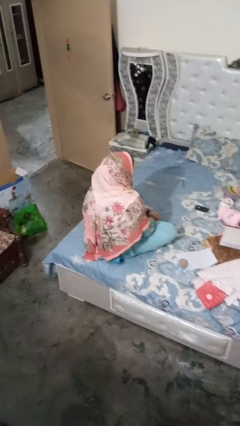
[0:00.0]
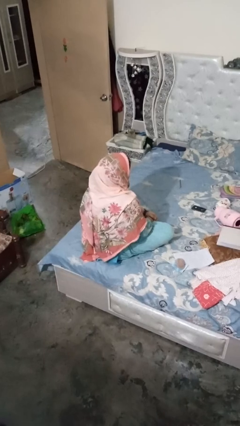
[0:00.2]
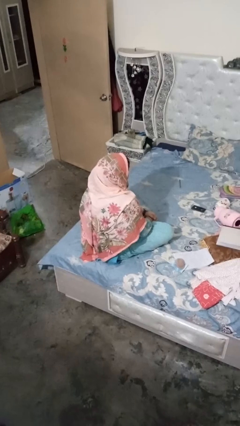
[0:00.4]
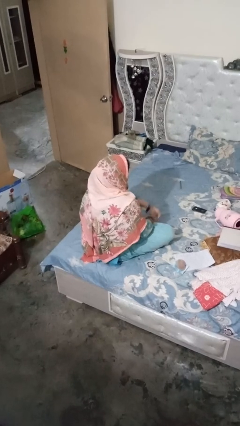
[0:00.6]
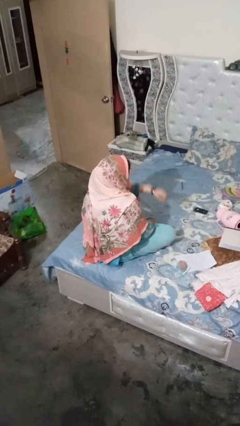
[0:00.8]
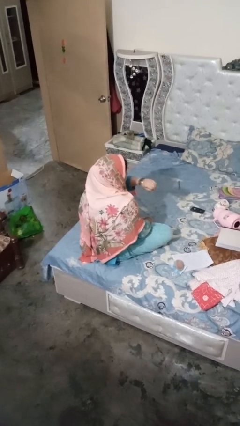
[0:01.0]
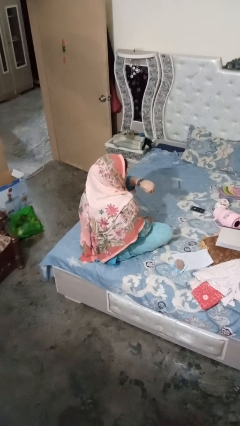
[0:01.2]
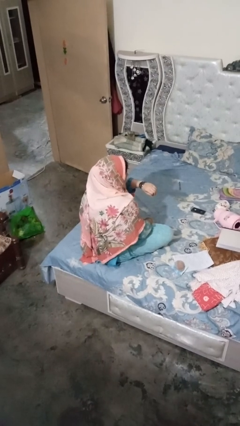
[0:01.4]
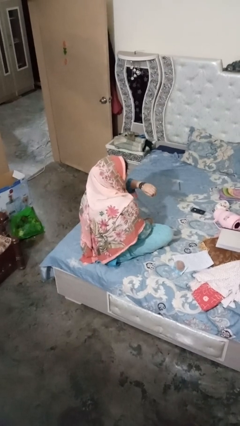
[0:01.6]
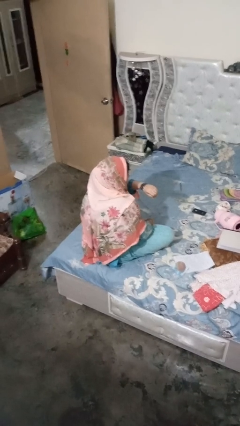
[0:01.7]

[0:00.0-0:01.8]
person gestures watch closely

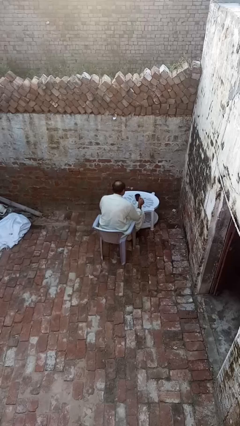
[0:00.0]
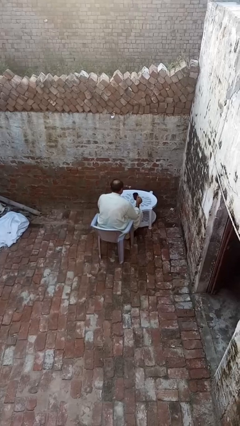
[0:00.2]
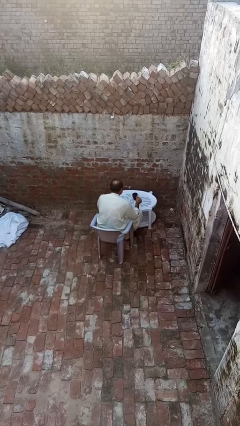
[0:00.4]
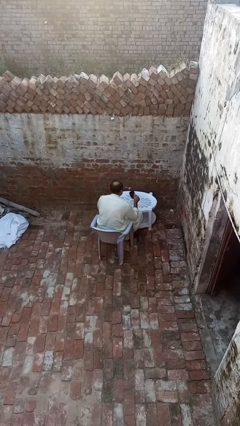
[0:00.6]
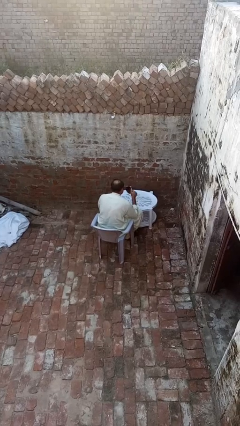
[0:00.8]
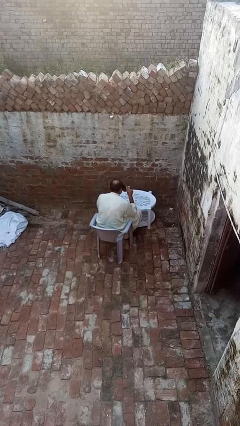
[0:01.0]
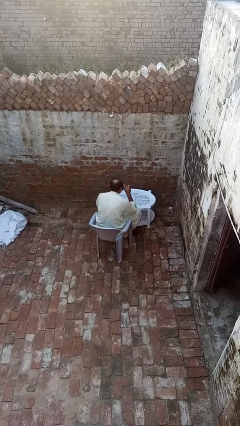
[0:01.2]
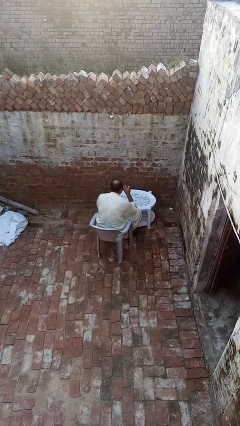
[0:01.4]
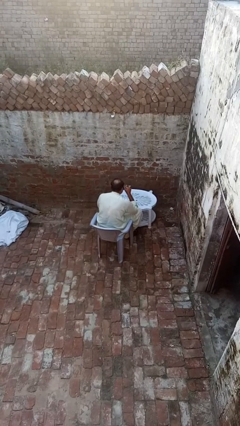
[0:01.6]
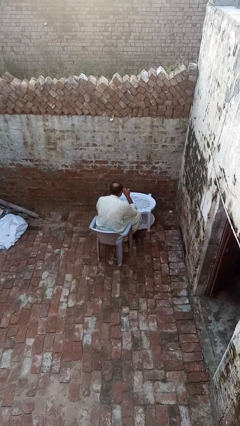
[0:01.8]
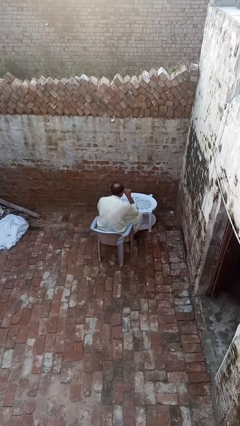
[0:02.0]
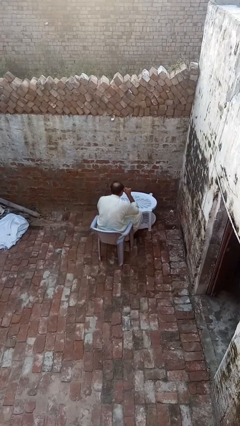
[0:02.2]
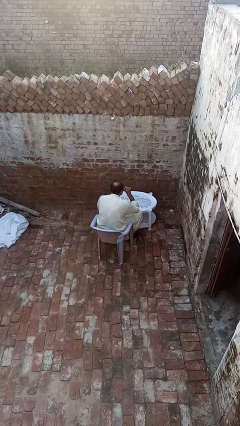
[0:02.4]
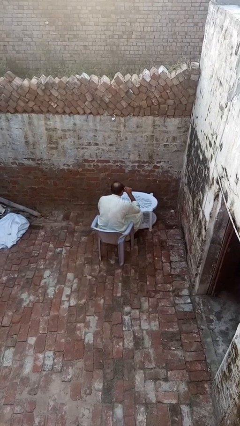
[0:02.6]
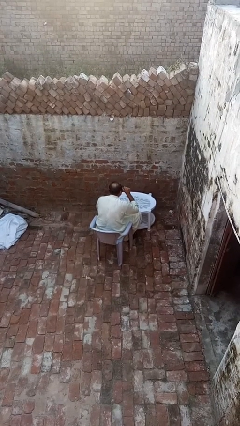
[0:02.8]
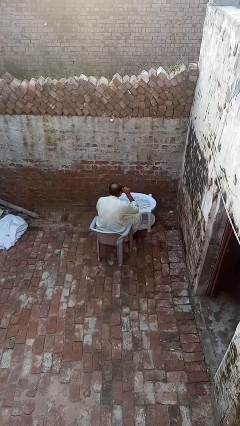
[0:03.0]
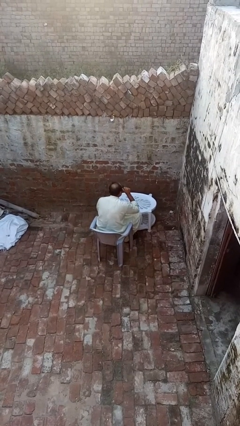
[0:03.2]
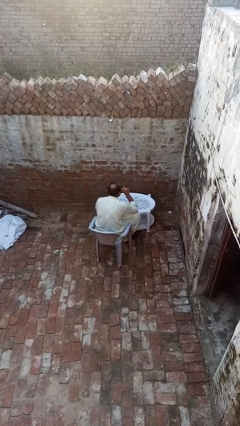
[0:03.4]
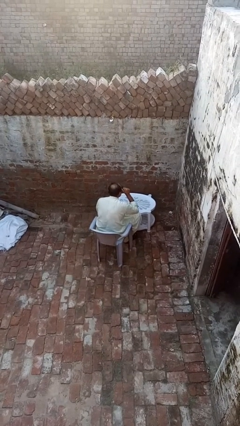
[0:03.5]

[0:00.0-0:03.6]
person drinks from mug

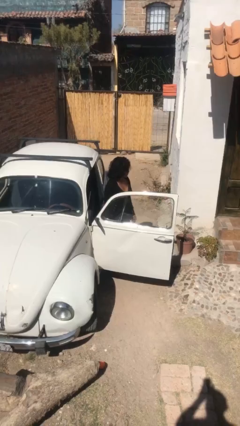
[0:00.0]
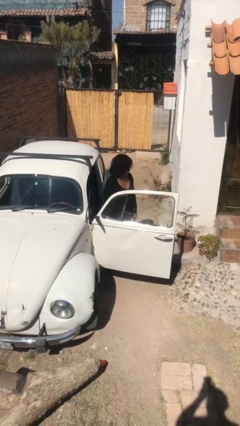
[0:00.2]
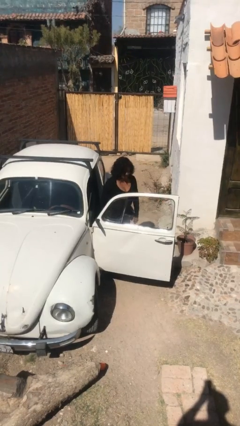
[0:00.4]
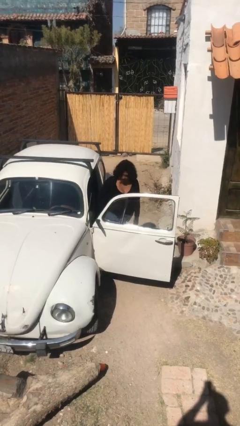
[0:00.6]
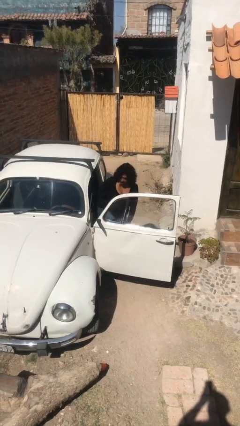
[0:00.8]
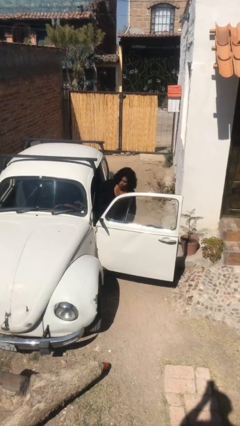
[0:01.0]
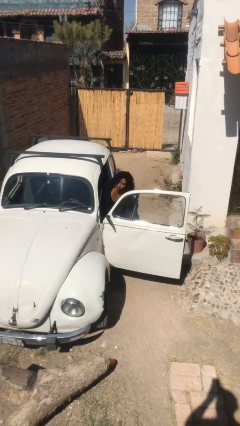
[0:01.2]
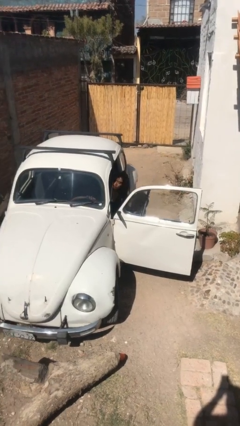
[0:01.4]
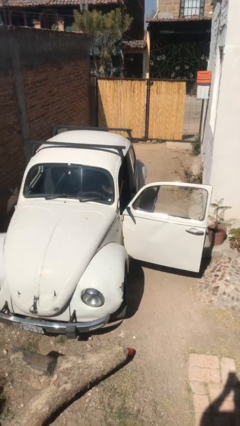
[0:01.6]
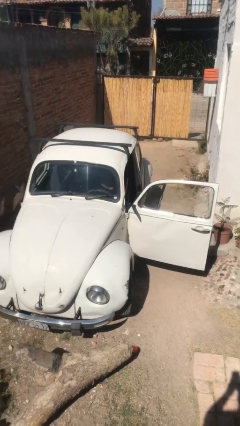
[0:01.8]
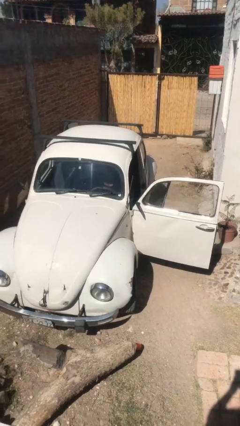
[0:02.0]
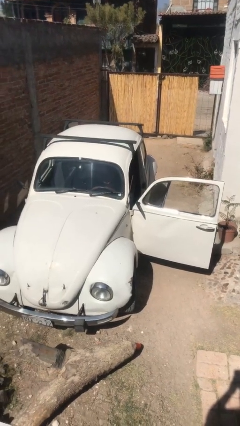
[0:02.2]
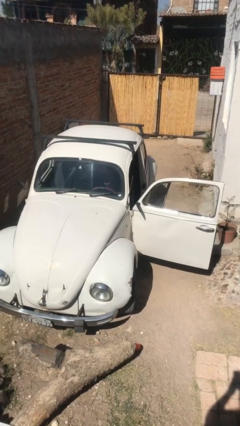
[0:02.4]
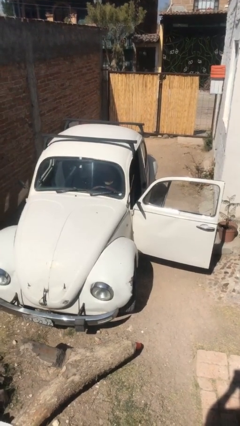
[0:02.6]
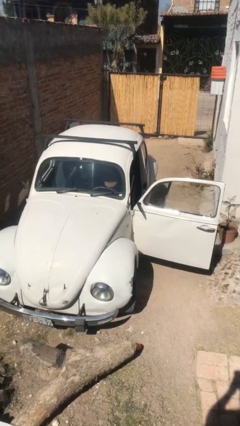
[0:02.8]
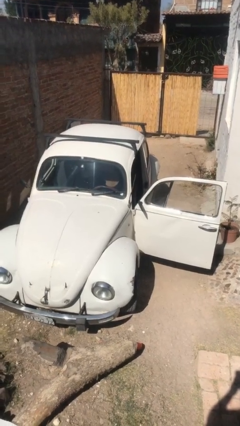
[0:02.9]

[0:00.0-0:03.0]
person enters car

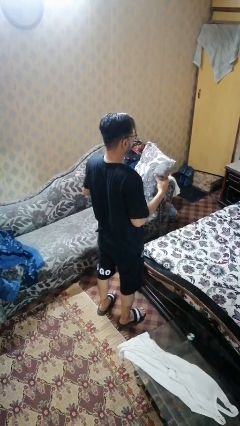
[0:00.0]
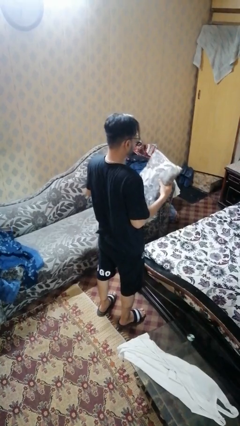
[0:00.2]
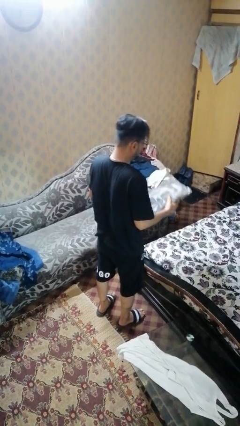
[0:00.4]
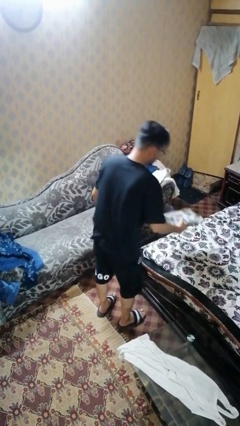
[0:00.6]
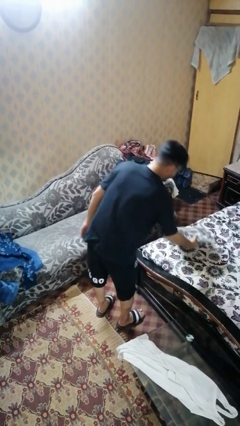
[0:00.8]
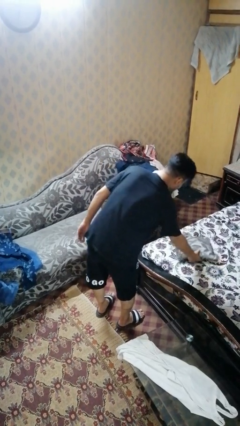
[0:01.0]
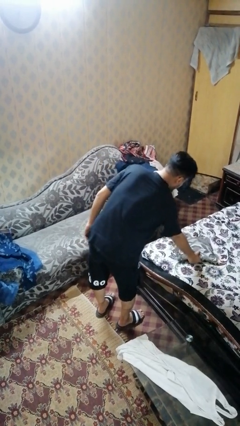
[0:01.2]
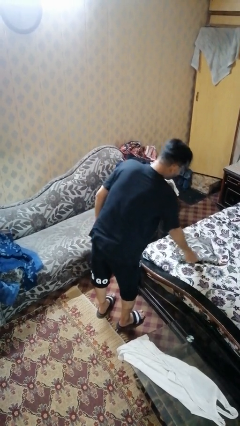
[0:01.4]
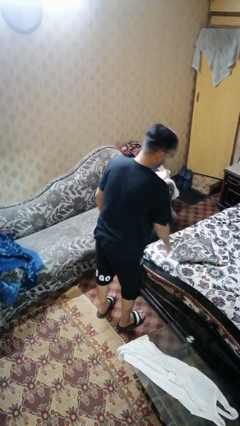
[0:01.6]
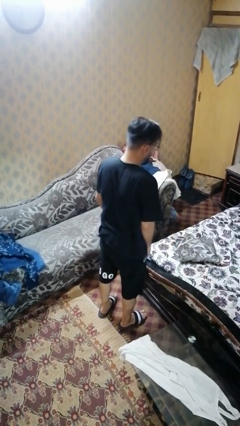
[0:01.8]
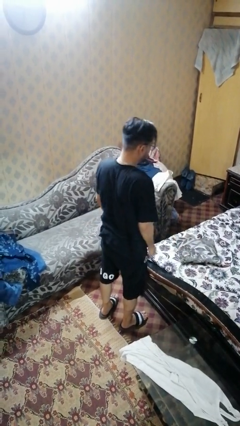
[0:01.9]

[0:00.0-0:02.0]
person puts down object on bed

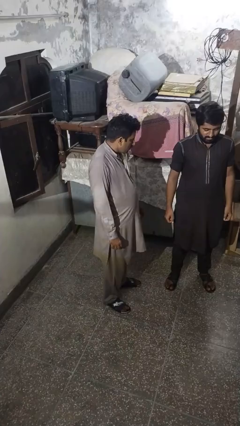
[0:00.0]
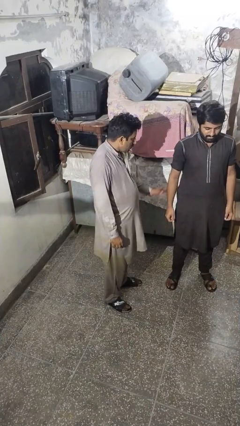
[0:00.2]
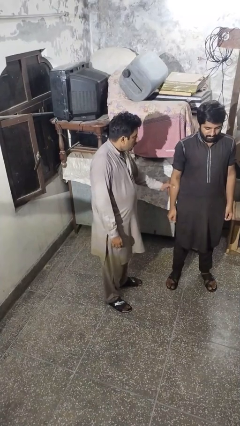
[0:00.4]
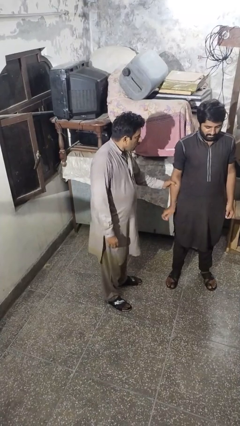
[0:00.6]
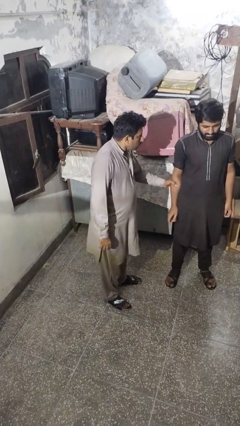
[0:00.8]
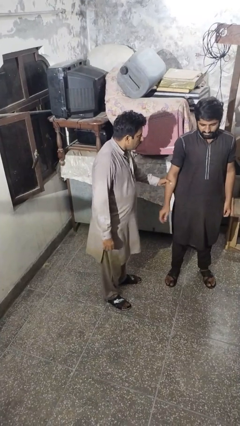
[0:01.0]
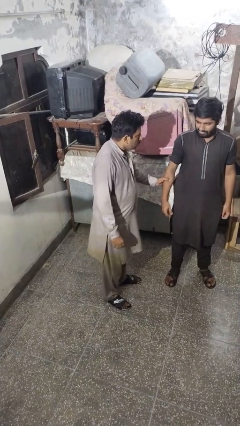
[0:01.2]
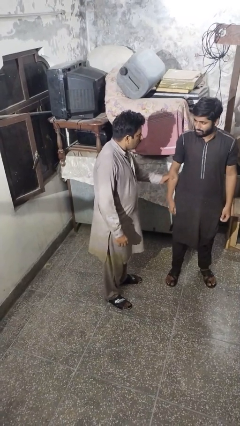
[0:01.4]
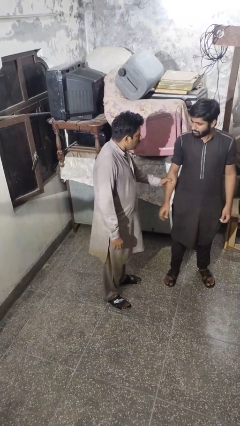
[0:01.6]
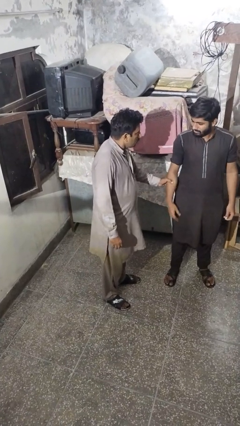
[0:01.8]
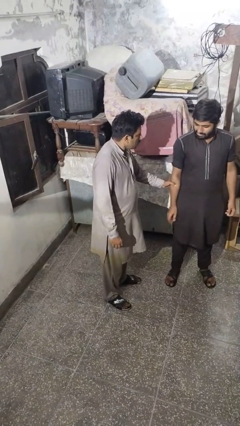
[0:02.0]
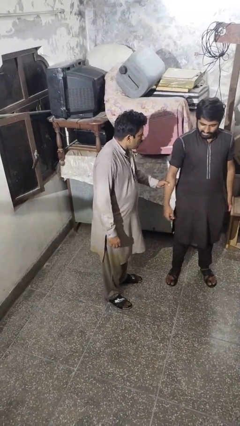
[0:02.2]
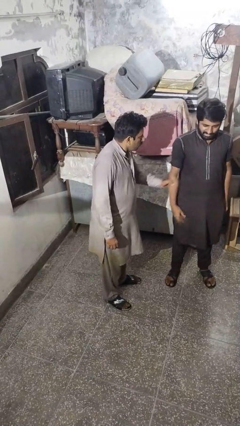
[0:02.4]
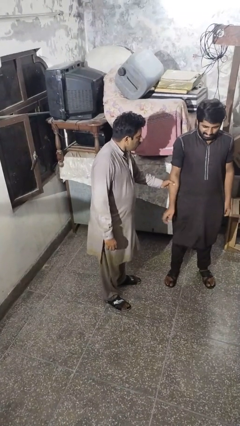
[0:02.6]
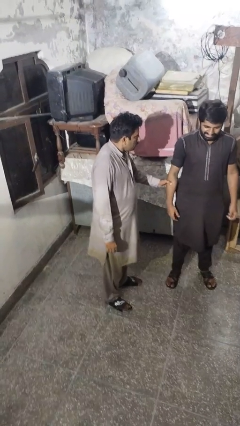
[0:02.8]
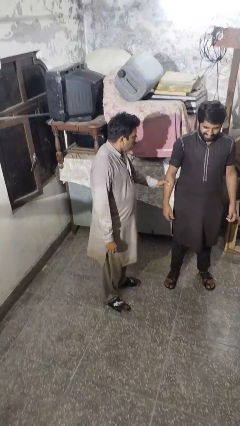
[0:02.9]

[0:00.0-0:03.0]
person grabs person by forearm

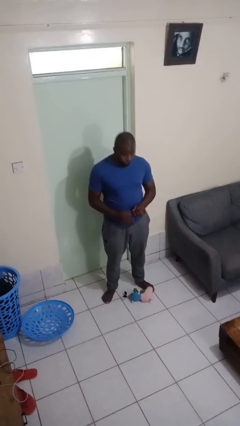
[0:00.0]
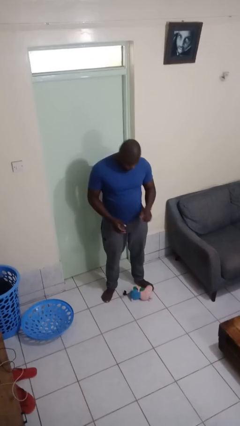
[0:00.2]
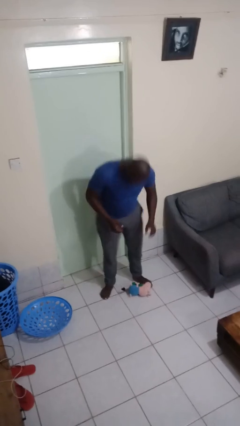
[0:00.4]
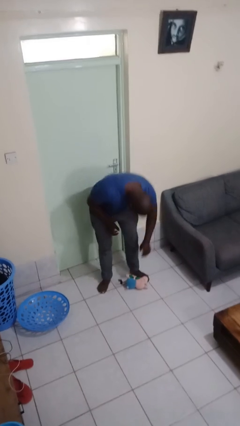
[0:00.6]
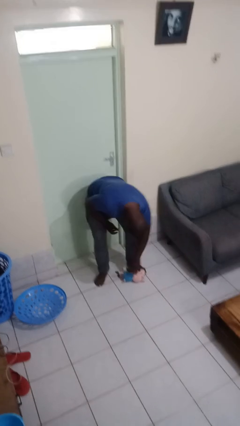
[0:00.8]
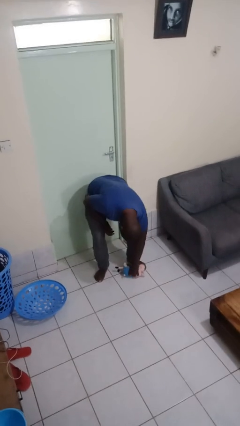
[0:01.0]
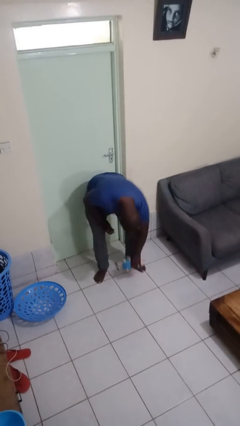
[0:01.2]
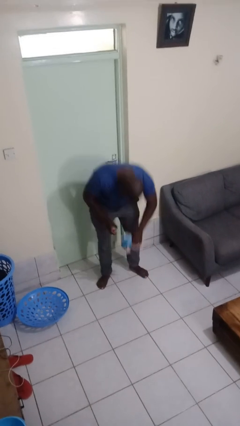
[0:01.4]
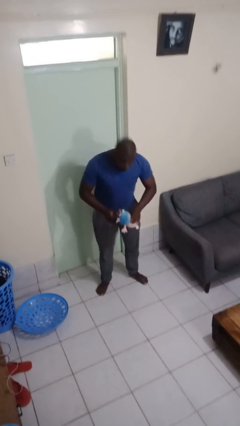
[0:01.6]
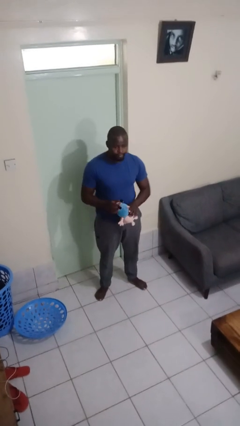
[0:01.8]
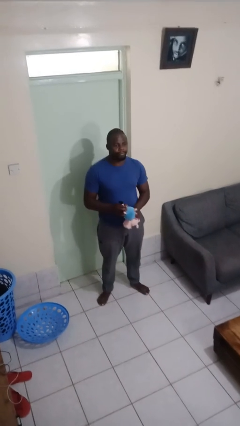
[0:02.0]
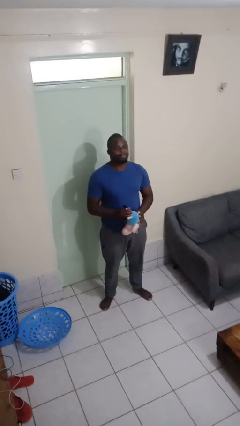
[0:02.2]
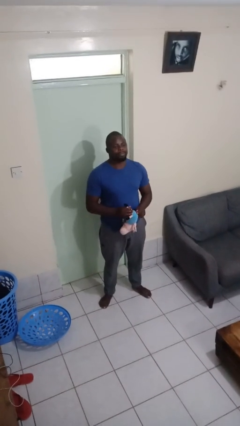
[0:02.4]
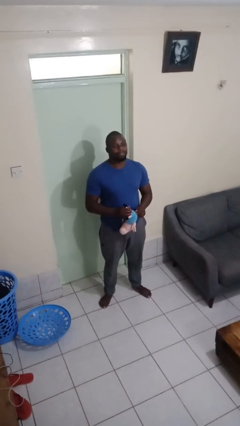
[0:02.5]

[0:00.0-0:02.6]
person picks up object from floor

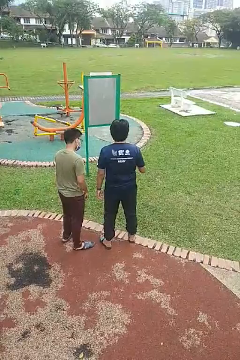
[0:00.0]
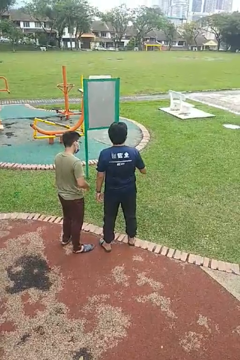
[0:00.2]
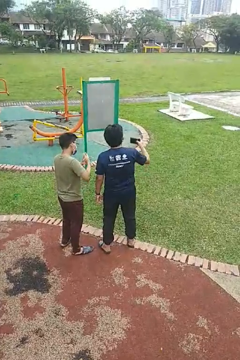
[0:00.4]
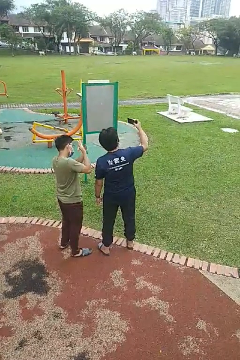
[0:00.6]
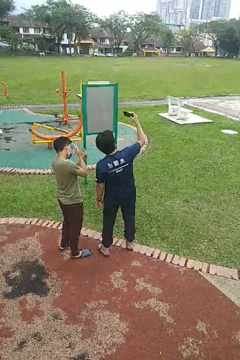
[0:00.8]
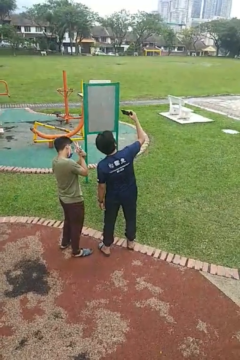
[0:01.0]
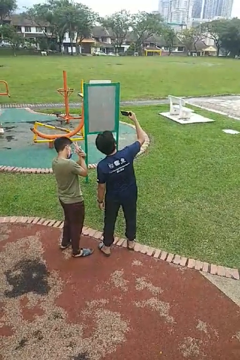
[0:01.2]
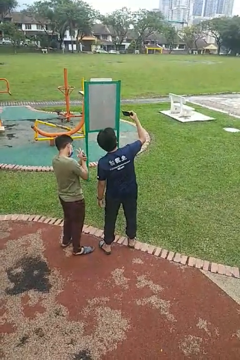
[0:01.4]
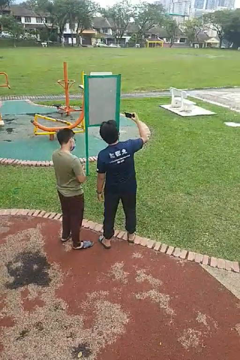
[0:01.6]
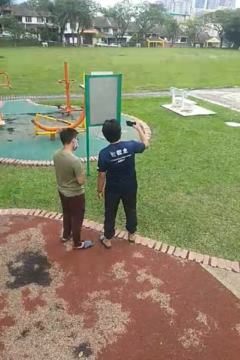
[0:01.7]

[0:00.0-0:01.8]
person takes selfie with person
